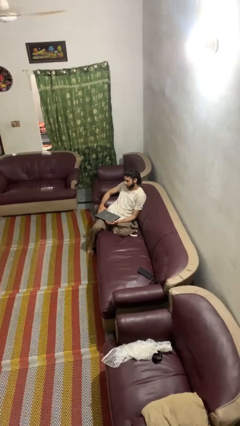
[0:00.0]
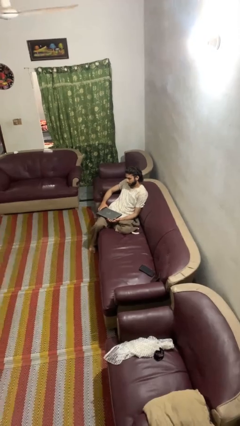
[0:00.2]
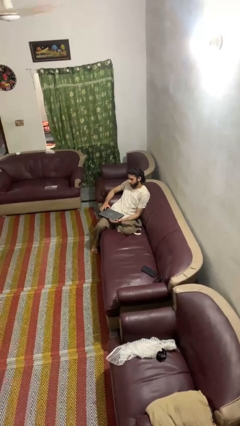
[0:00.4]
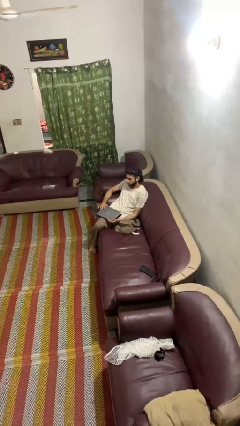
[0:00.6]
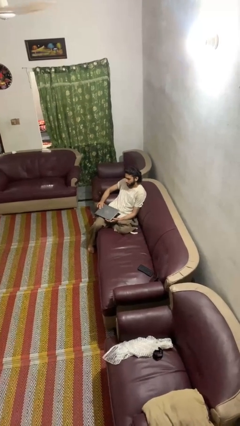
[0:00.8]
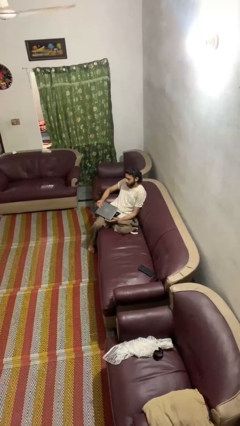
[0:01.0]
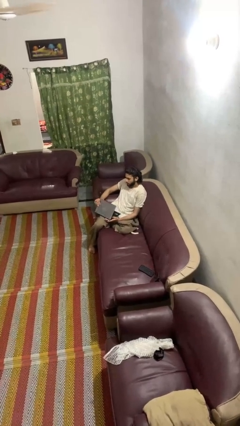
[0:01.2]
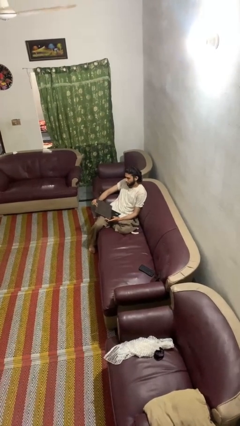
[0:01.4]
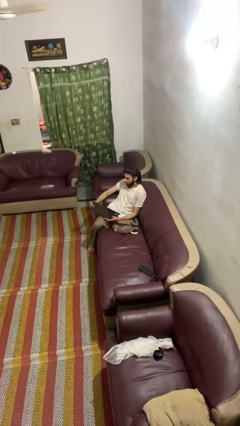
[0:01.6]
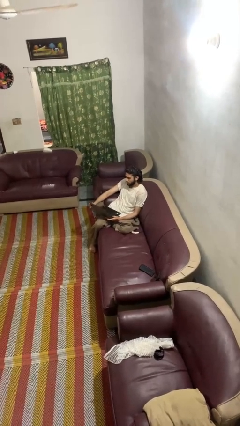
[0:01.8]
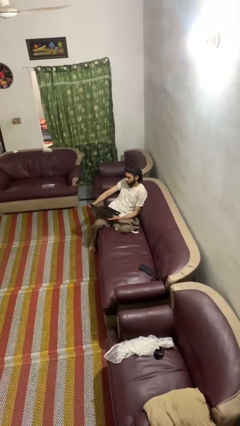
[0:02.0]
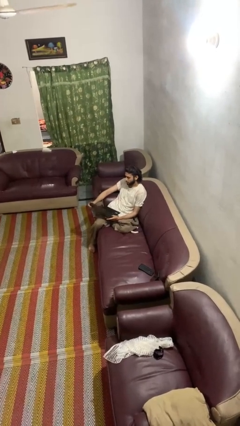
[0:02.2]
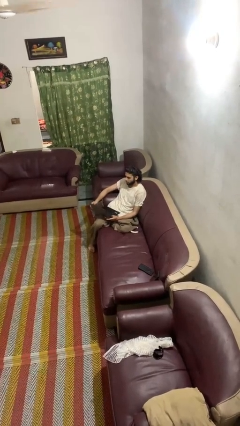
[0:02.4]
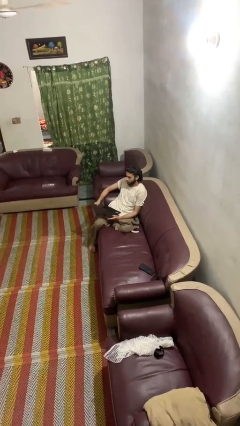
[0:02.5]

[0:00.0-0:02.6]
person opens laptop

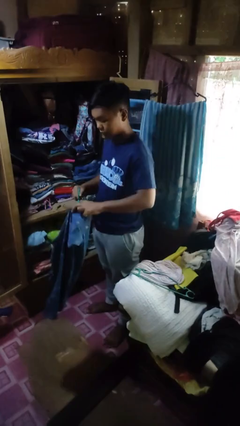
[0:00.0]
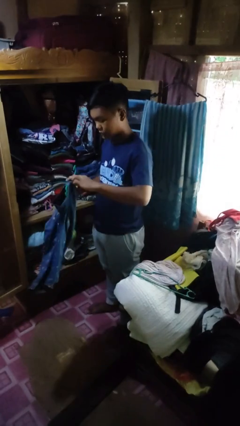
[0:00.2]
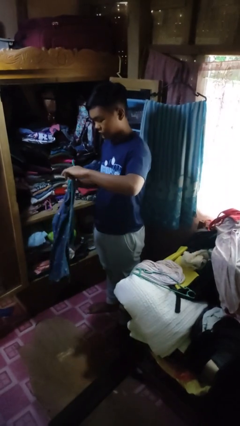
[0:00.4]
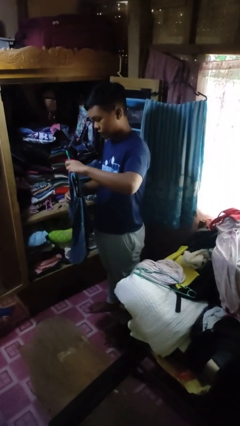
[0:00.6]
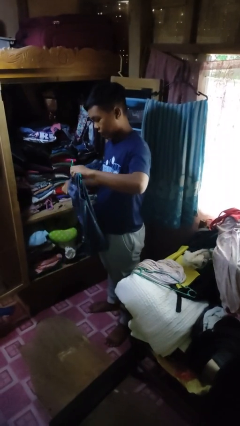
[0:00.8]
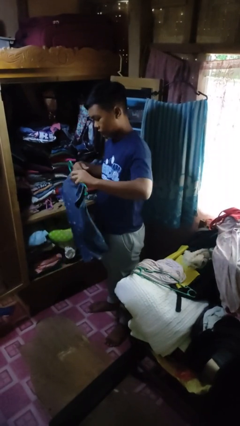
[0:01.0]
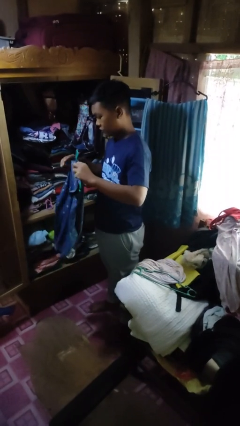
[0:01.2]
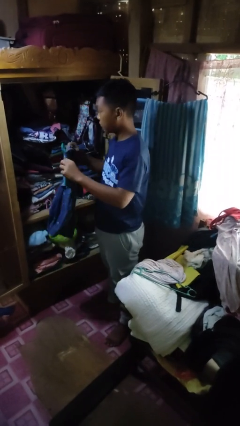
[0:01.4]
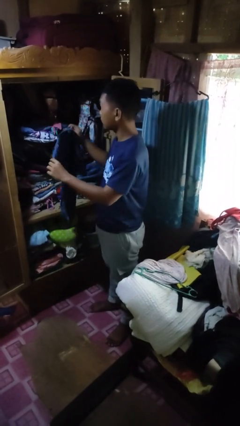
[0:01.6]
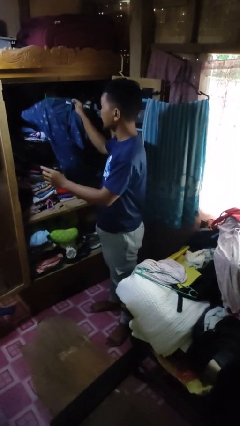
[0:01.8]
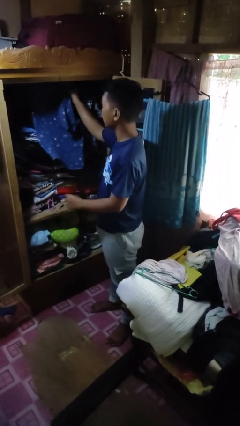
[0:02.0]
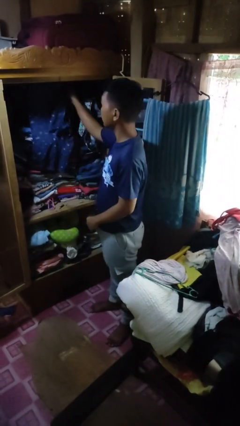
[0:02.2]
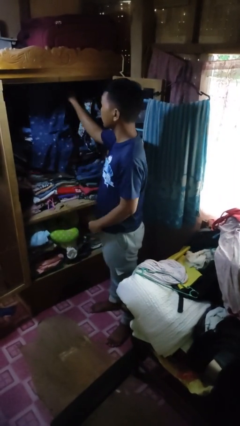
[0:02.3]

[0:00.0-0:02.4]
person puts clothes into closet

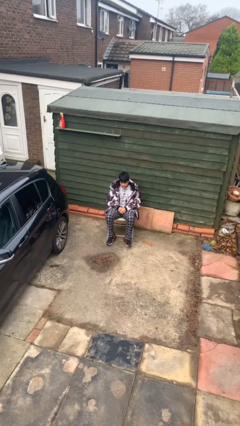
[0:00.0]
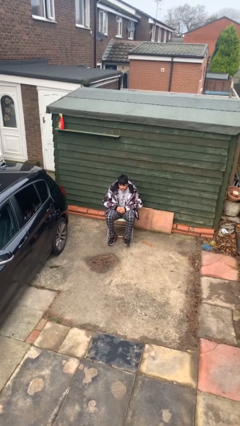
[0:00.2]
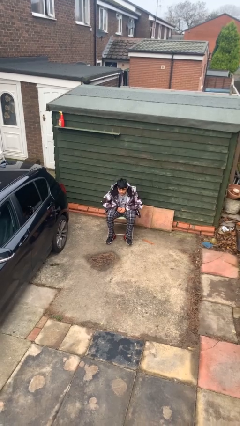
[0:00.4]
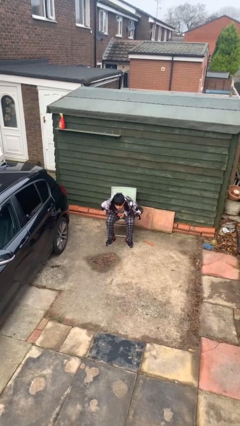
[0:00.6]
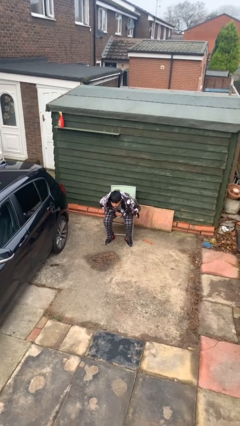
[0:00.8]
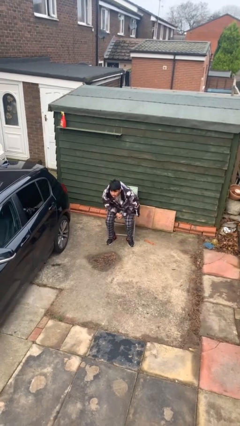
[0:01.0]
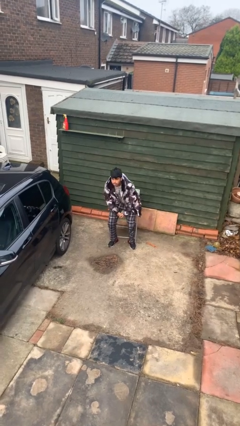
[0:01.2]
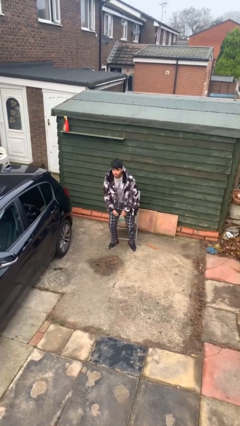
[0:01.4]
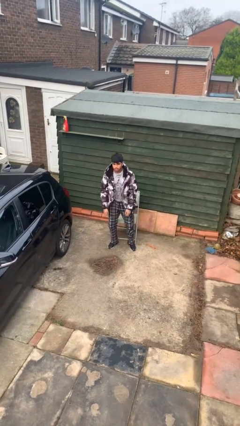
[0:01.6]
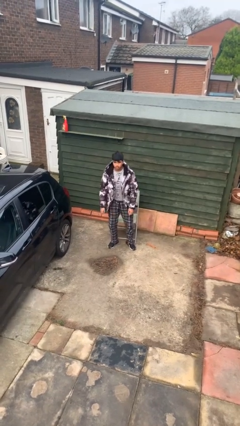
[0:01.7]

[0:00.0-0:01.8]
person stands up

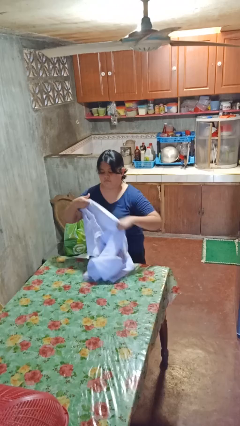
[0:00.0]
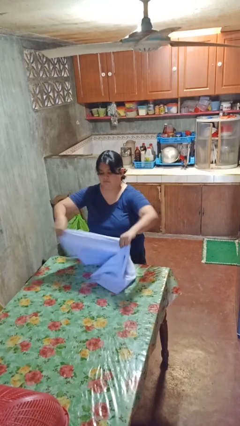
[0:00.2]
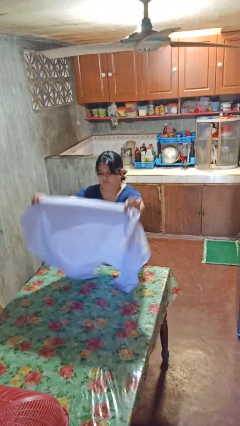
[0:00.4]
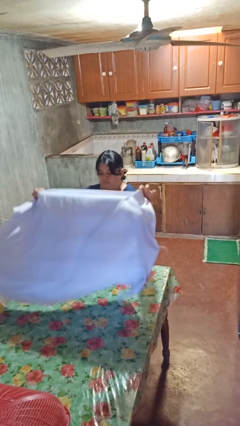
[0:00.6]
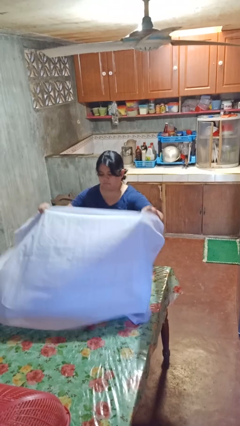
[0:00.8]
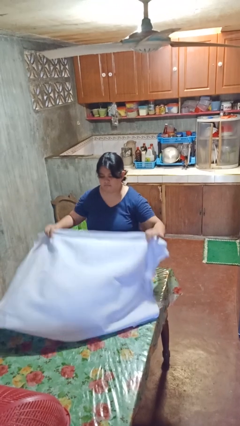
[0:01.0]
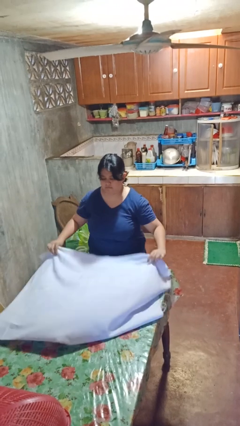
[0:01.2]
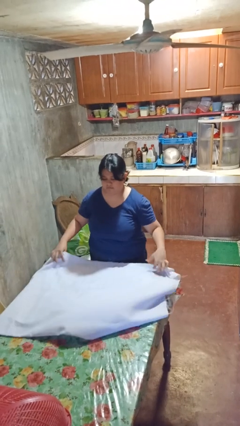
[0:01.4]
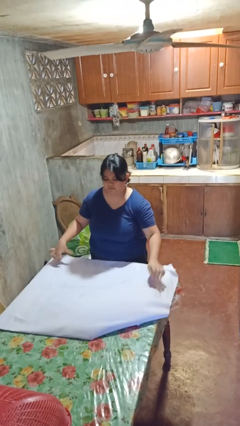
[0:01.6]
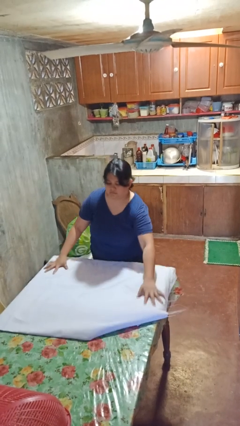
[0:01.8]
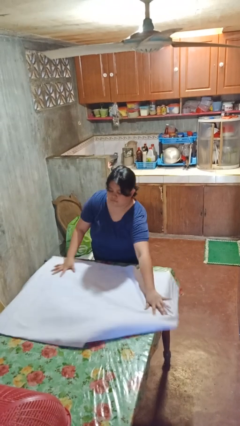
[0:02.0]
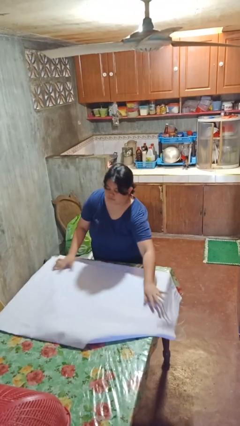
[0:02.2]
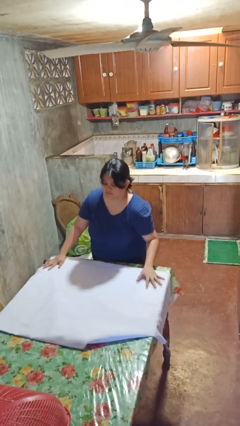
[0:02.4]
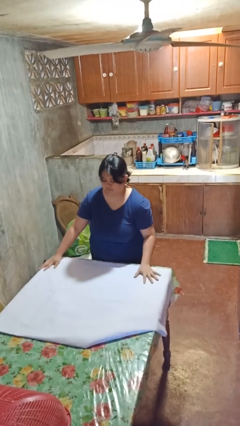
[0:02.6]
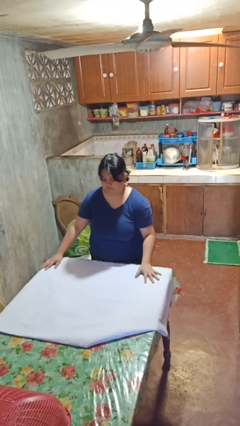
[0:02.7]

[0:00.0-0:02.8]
person spreads tablecloth

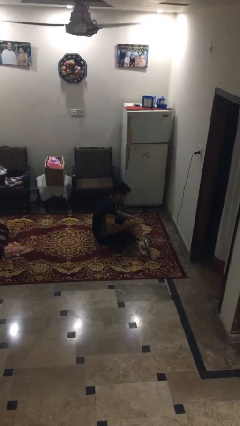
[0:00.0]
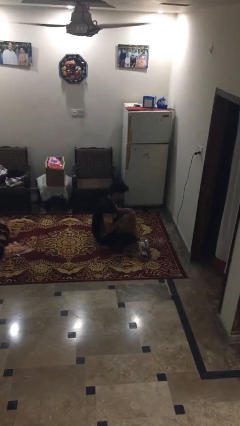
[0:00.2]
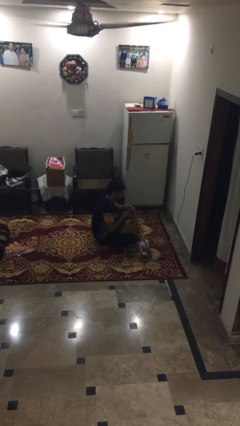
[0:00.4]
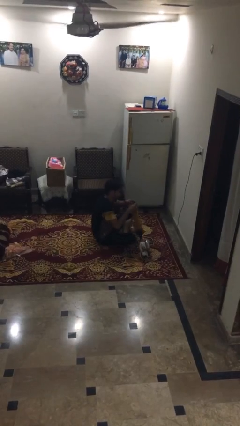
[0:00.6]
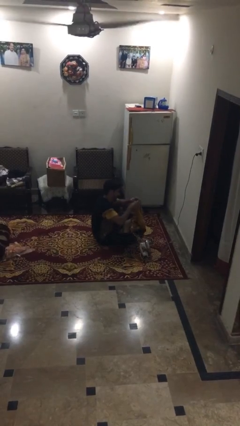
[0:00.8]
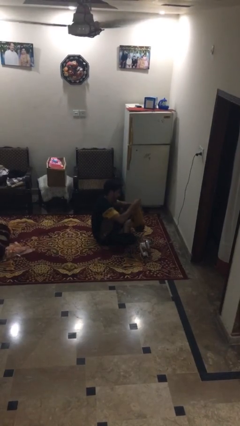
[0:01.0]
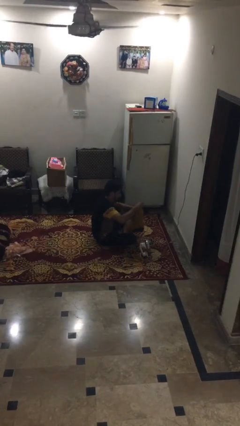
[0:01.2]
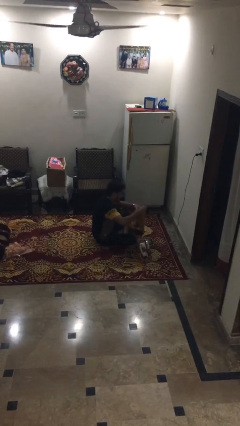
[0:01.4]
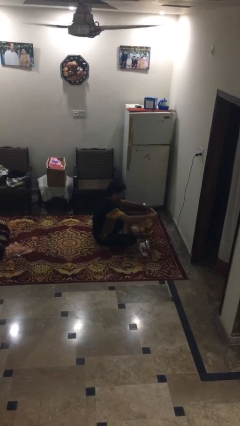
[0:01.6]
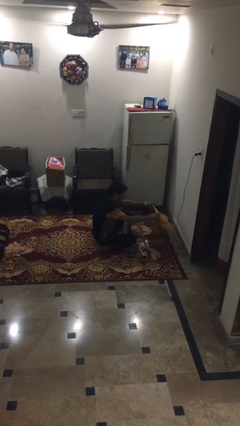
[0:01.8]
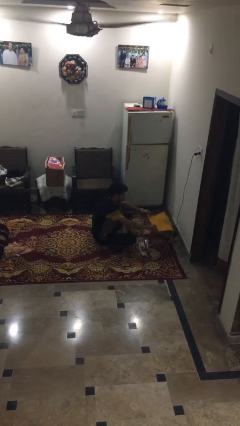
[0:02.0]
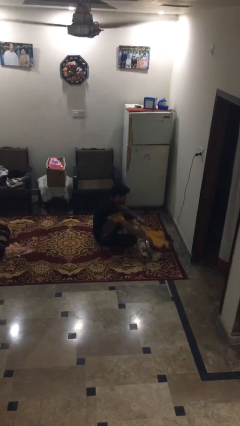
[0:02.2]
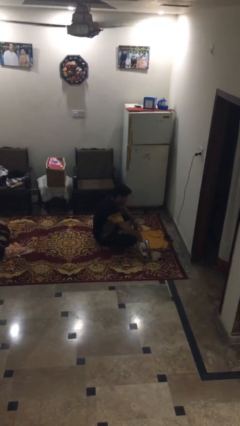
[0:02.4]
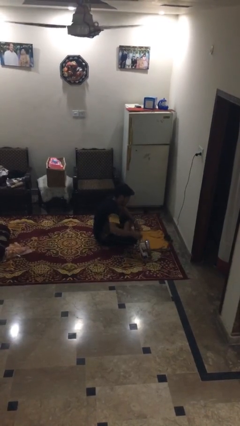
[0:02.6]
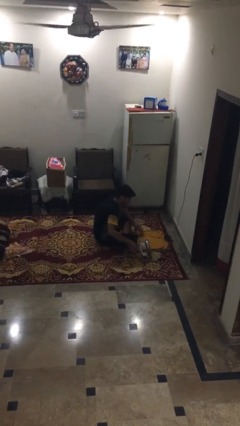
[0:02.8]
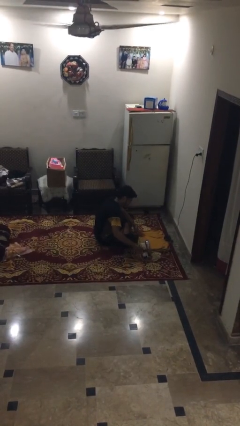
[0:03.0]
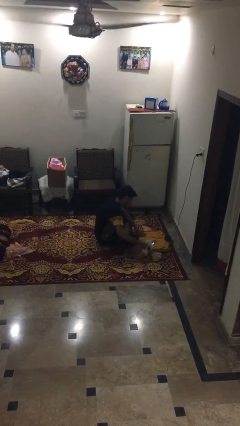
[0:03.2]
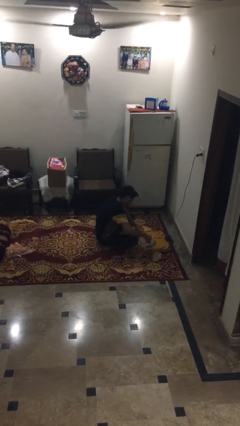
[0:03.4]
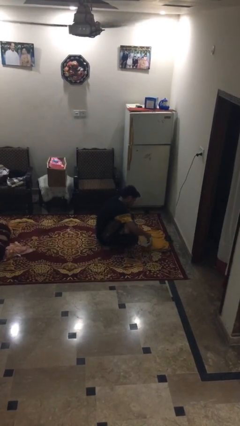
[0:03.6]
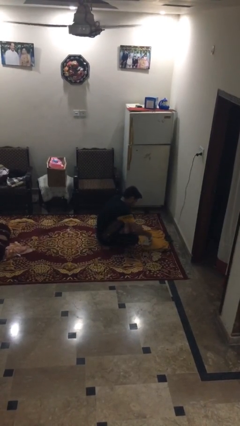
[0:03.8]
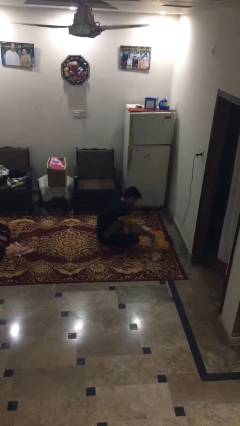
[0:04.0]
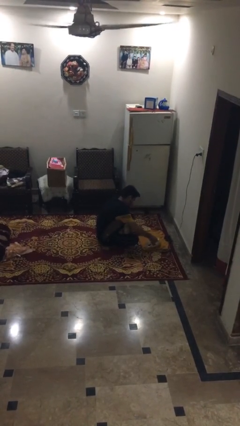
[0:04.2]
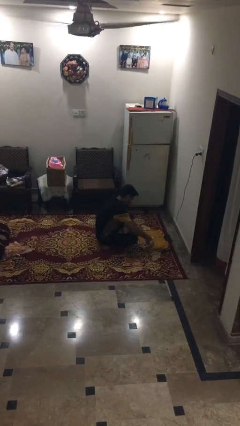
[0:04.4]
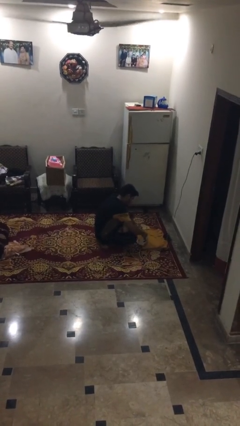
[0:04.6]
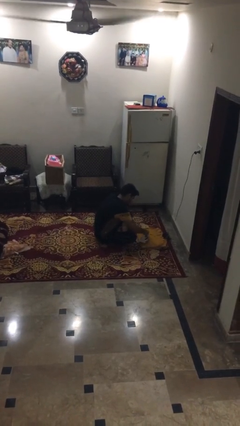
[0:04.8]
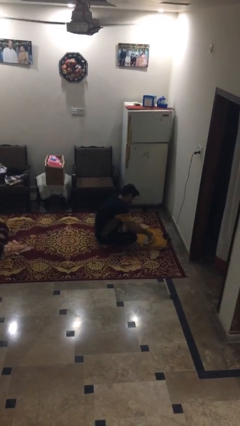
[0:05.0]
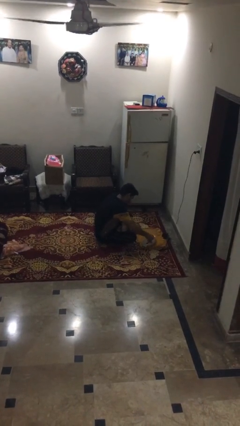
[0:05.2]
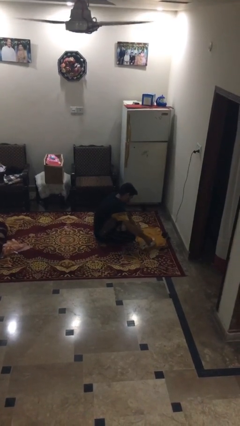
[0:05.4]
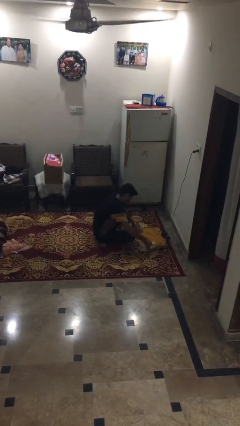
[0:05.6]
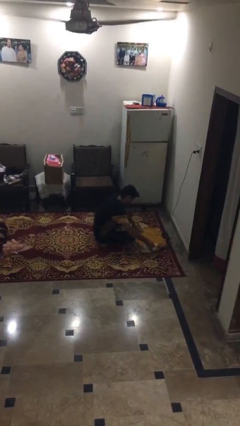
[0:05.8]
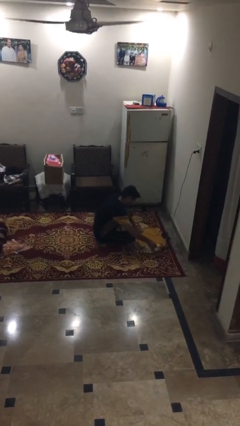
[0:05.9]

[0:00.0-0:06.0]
person irons clothes

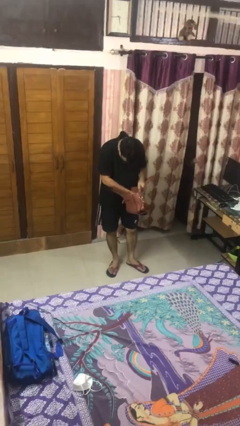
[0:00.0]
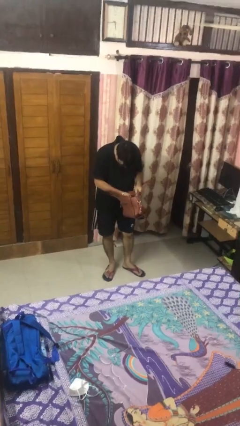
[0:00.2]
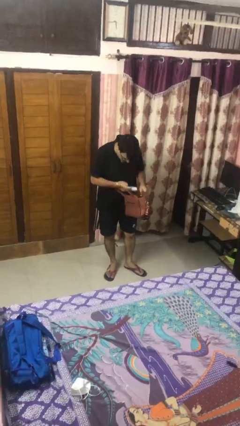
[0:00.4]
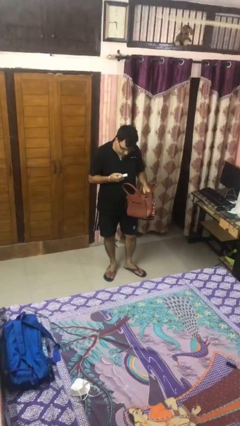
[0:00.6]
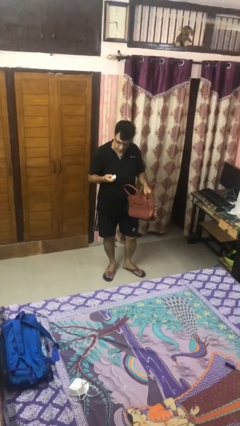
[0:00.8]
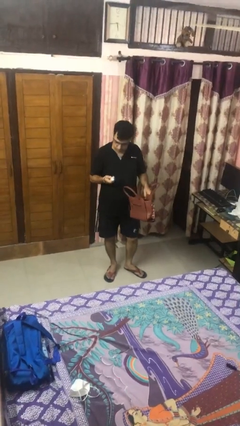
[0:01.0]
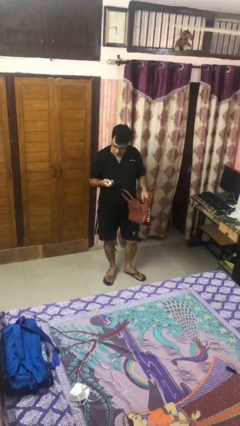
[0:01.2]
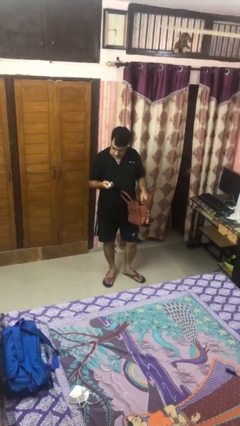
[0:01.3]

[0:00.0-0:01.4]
person takes object from purse

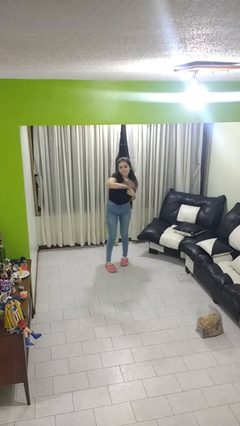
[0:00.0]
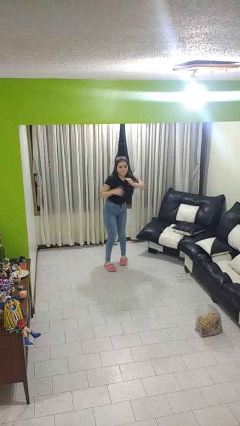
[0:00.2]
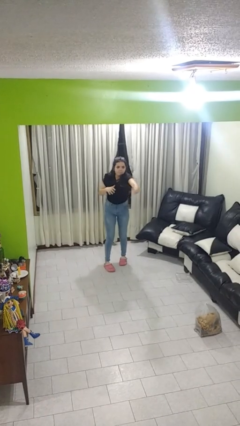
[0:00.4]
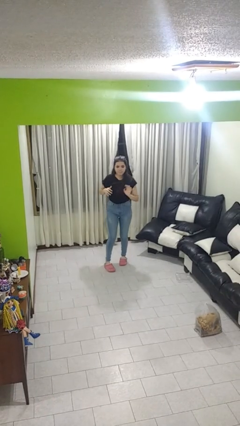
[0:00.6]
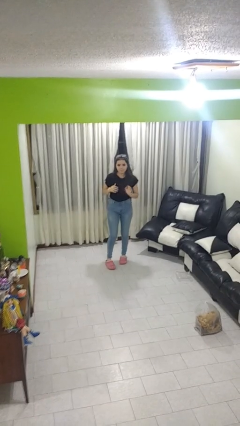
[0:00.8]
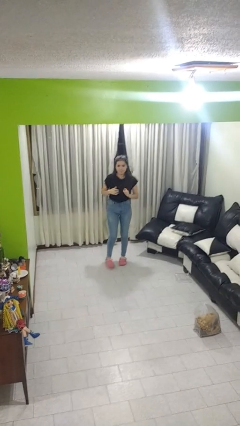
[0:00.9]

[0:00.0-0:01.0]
person karate chop
